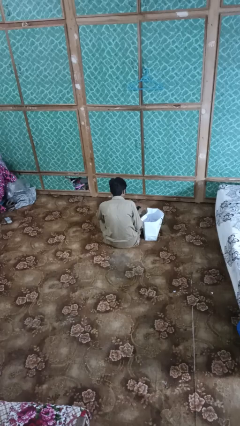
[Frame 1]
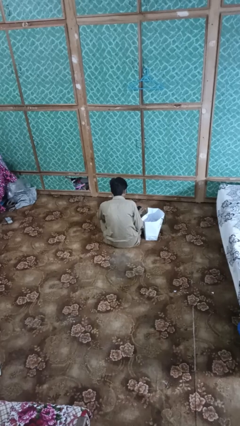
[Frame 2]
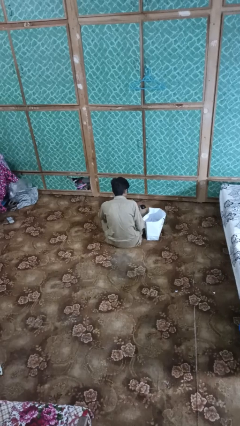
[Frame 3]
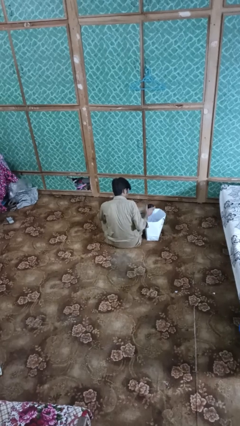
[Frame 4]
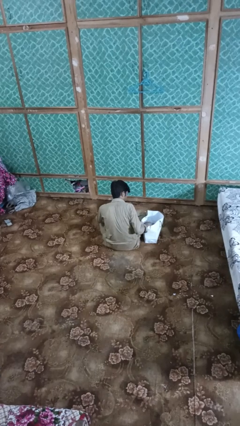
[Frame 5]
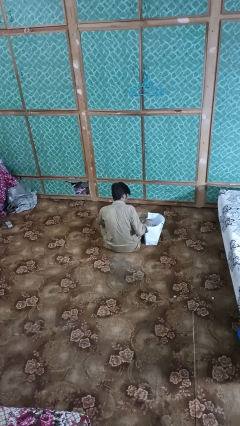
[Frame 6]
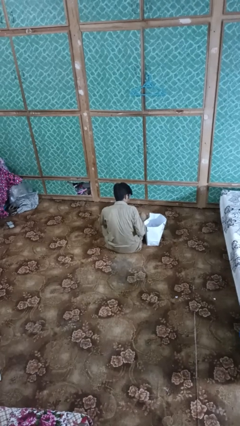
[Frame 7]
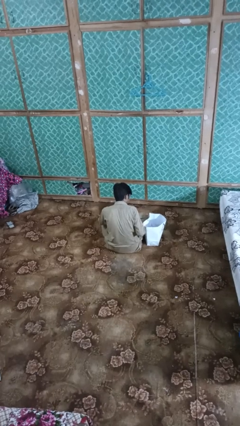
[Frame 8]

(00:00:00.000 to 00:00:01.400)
person puts object into bag

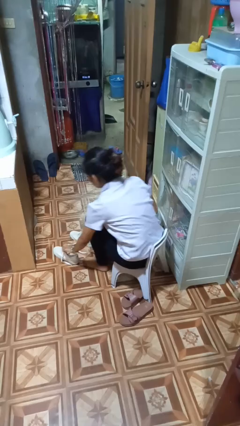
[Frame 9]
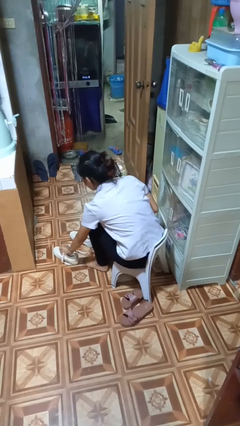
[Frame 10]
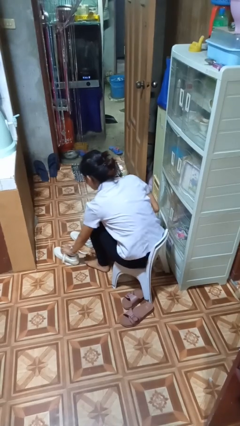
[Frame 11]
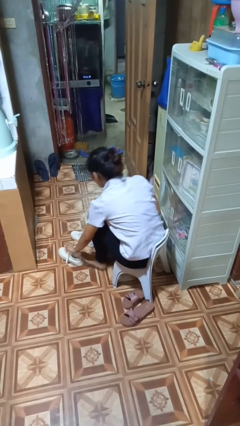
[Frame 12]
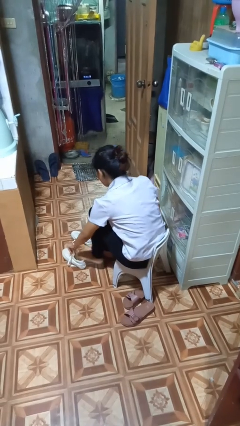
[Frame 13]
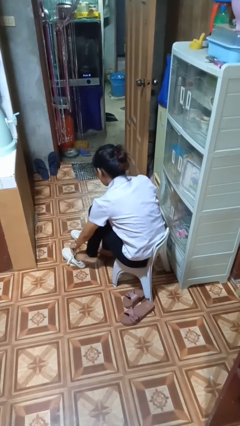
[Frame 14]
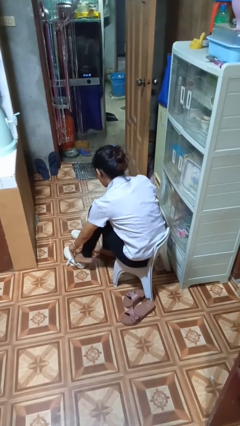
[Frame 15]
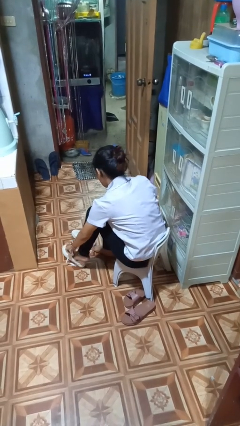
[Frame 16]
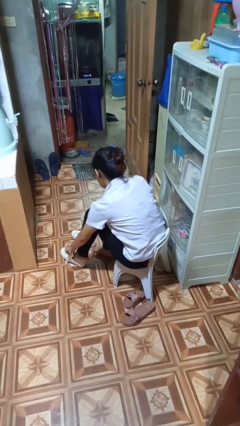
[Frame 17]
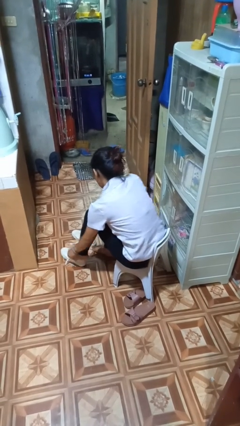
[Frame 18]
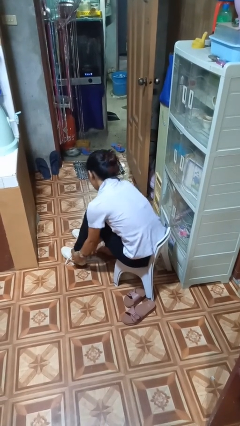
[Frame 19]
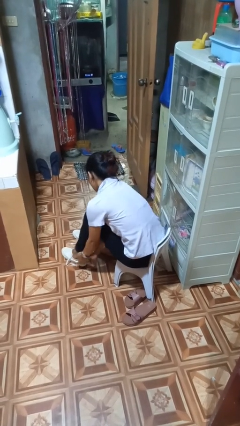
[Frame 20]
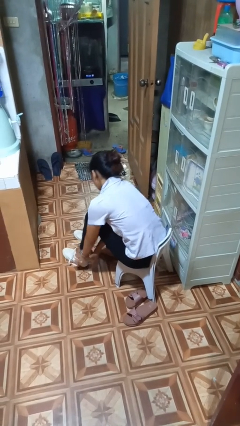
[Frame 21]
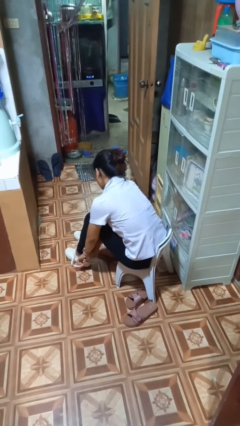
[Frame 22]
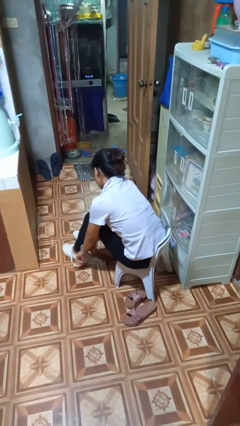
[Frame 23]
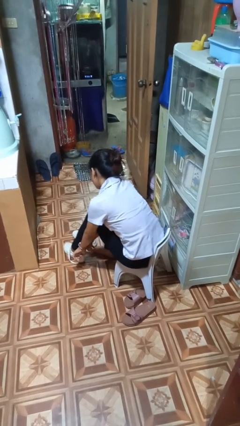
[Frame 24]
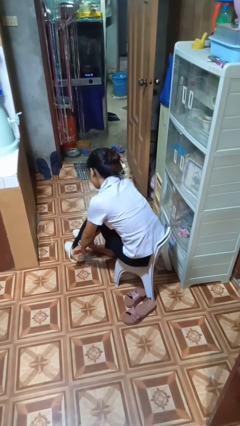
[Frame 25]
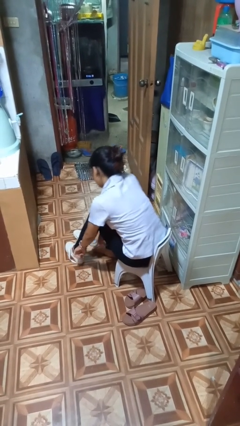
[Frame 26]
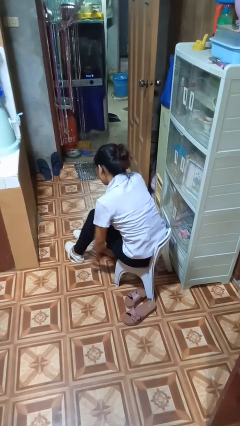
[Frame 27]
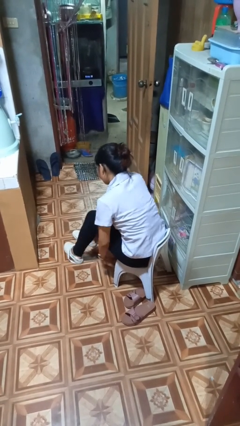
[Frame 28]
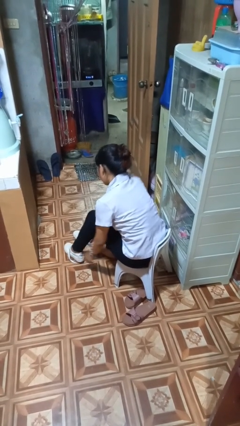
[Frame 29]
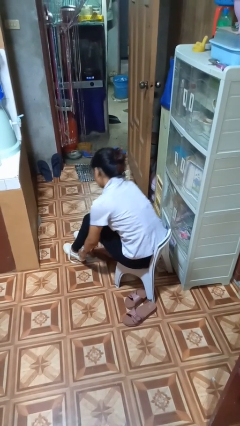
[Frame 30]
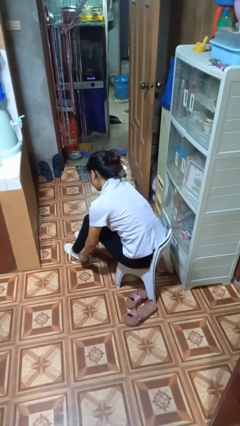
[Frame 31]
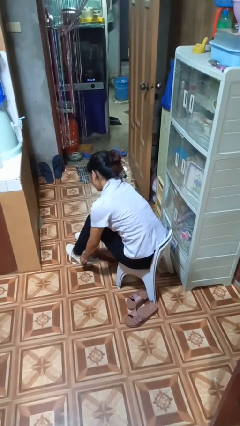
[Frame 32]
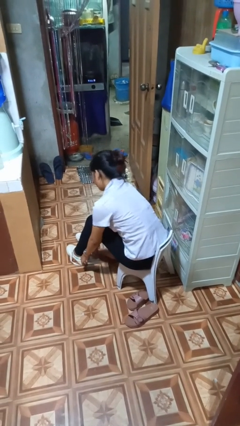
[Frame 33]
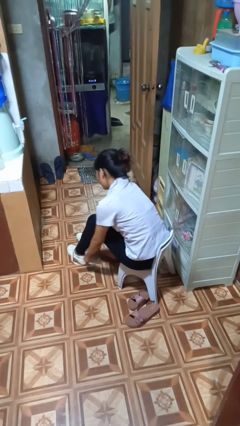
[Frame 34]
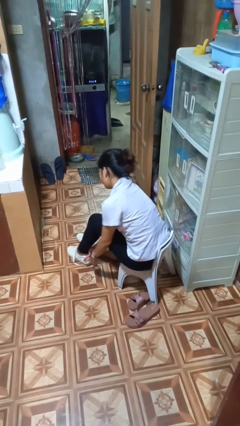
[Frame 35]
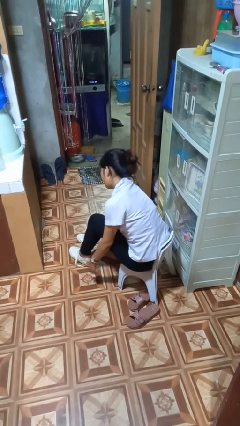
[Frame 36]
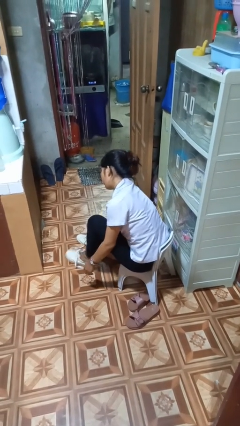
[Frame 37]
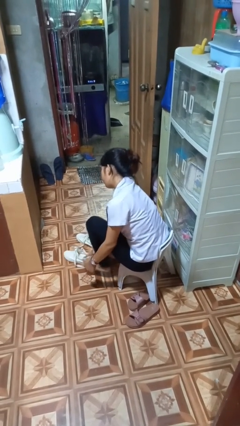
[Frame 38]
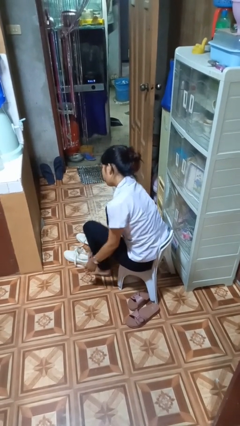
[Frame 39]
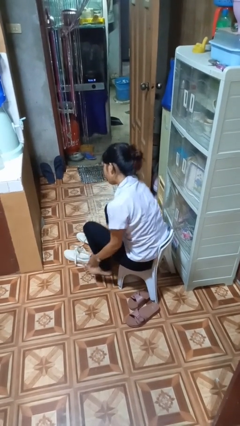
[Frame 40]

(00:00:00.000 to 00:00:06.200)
person puts on shoes

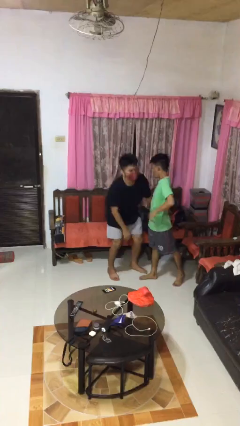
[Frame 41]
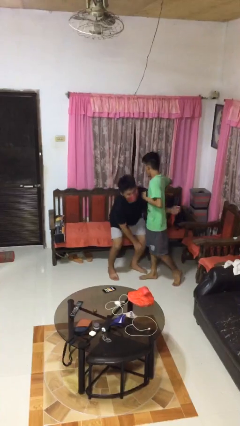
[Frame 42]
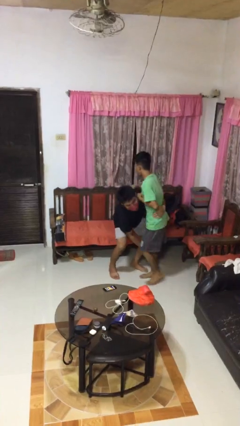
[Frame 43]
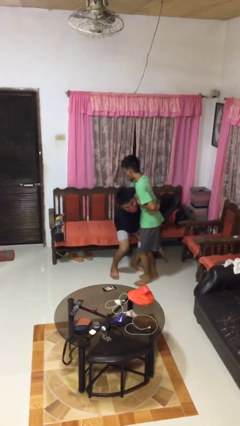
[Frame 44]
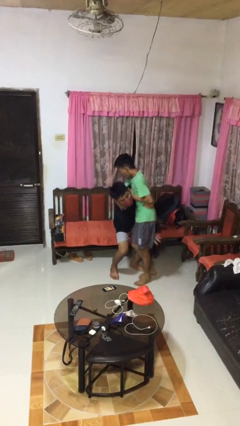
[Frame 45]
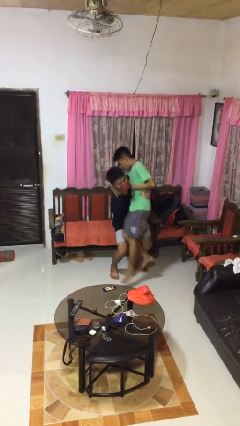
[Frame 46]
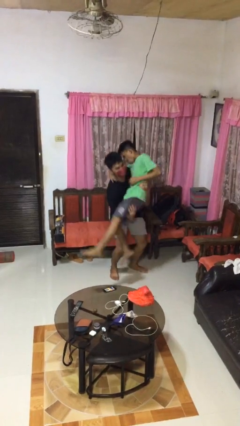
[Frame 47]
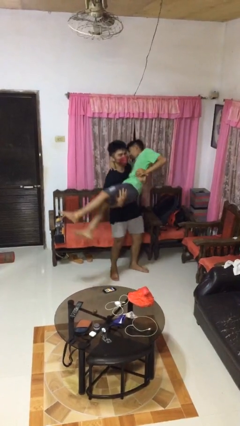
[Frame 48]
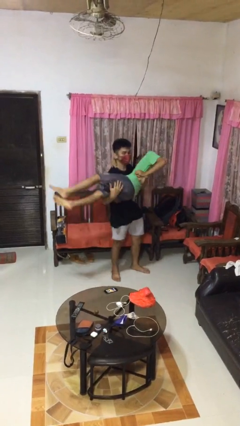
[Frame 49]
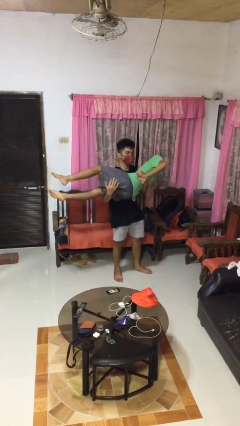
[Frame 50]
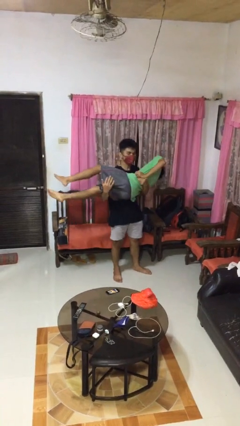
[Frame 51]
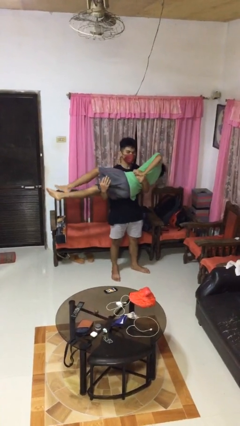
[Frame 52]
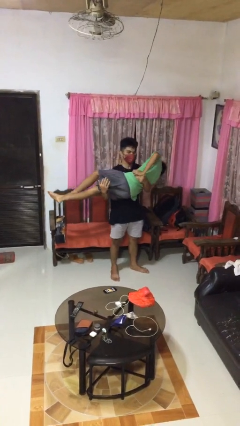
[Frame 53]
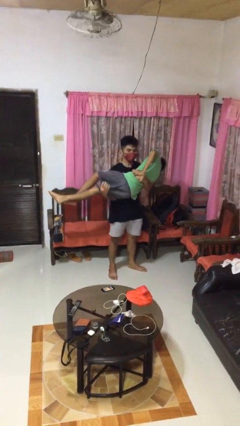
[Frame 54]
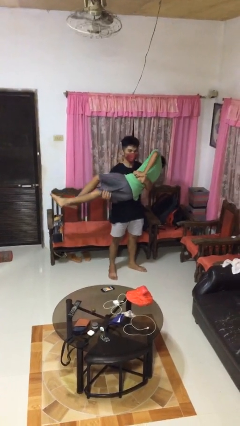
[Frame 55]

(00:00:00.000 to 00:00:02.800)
person picks up person

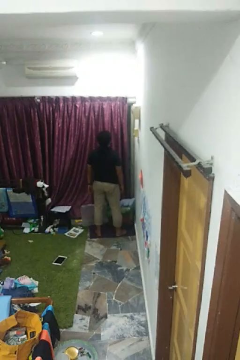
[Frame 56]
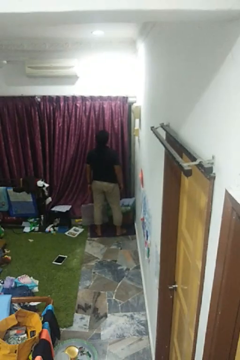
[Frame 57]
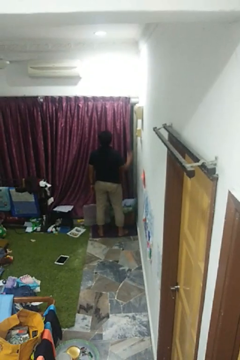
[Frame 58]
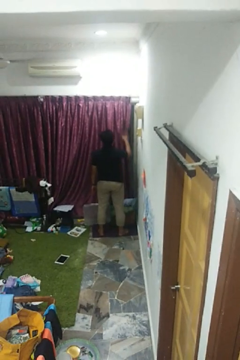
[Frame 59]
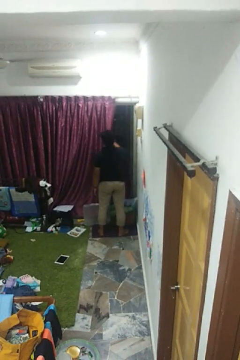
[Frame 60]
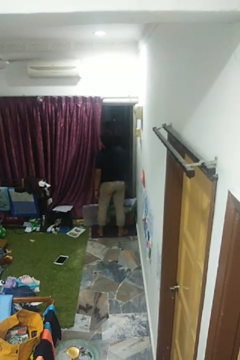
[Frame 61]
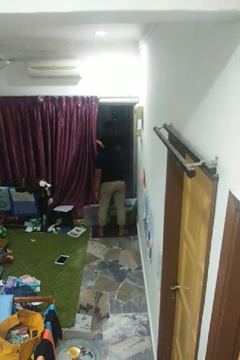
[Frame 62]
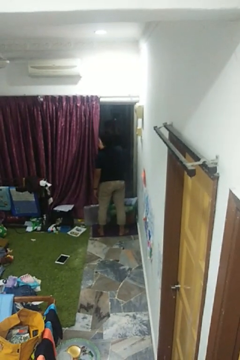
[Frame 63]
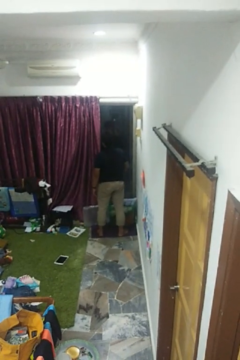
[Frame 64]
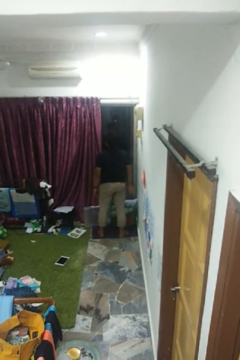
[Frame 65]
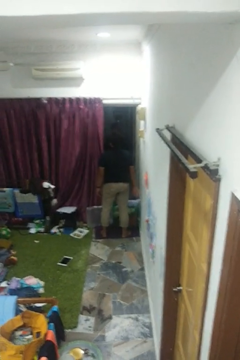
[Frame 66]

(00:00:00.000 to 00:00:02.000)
person opens curtains

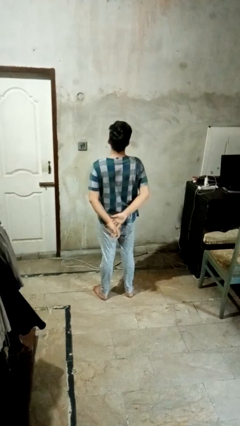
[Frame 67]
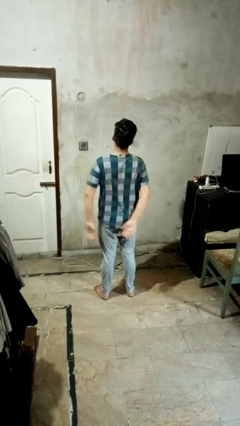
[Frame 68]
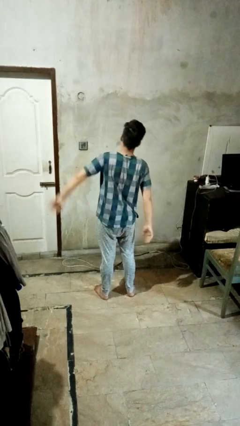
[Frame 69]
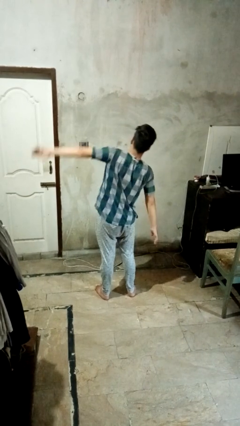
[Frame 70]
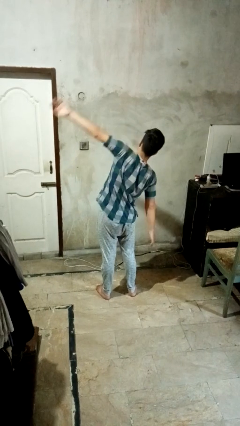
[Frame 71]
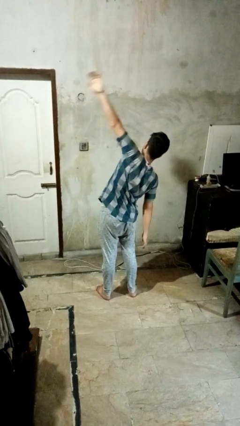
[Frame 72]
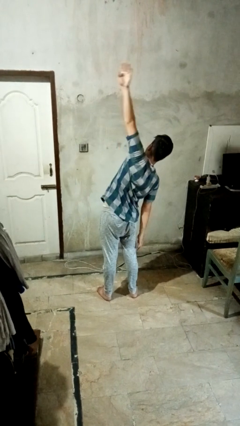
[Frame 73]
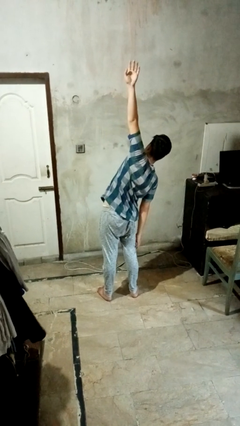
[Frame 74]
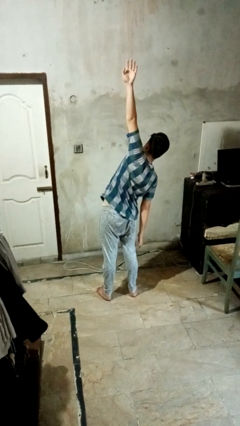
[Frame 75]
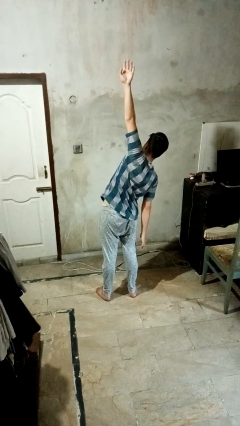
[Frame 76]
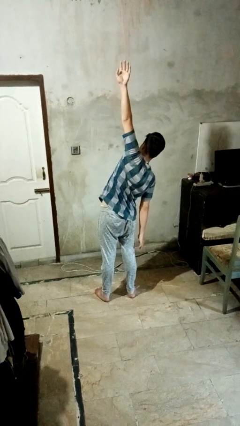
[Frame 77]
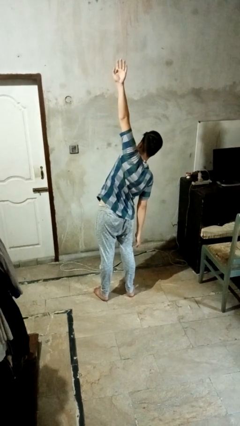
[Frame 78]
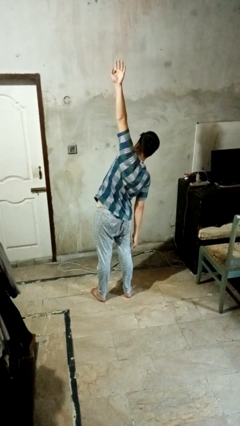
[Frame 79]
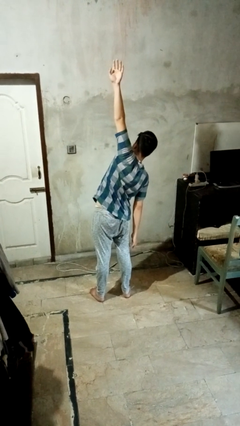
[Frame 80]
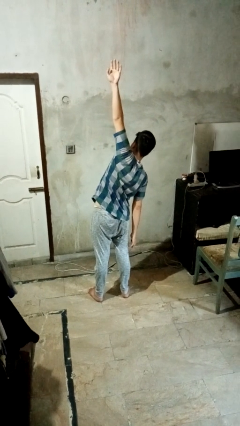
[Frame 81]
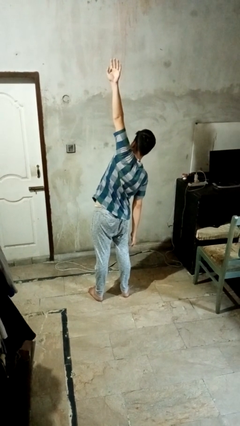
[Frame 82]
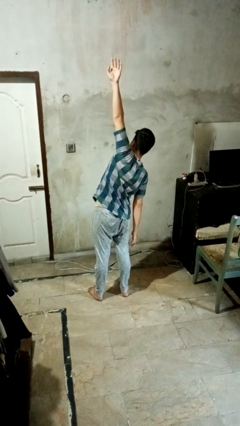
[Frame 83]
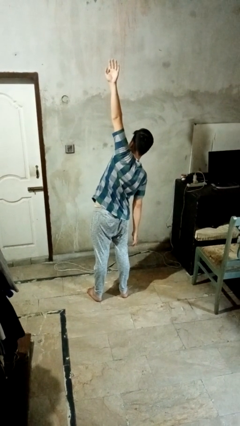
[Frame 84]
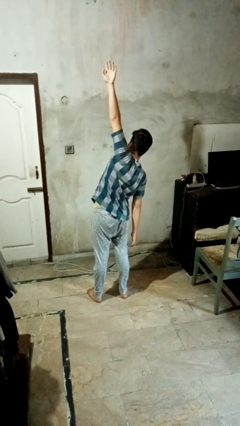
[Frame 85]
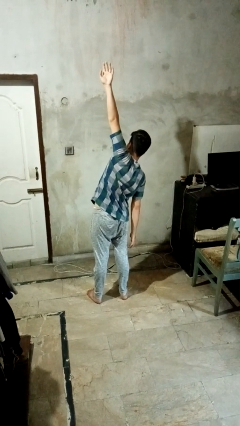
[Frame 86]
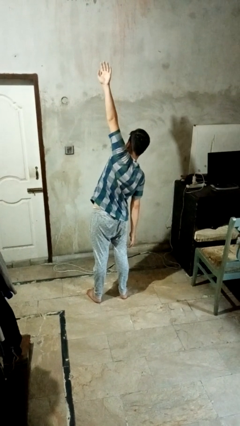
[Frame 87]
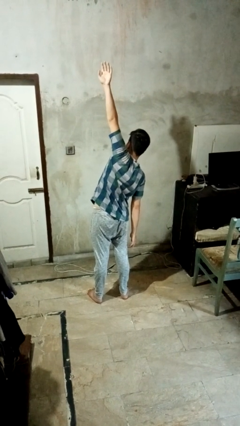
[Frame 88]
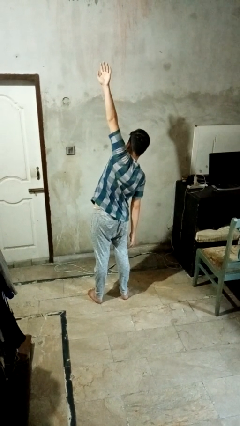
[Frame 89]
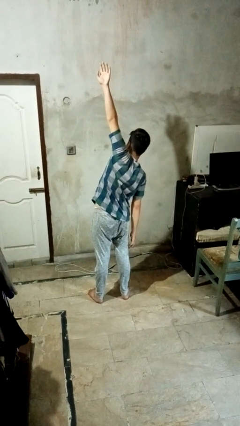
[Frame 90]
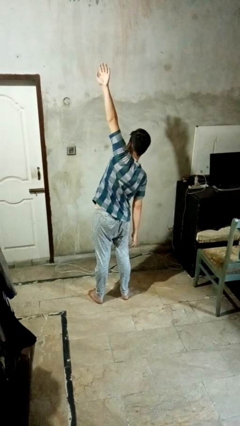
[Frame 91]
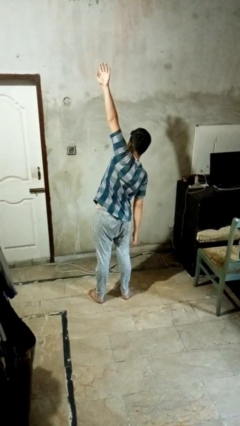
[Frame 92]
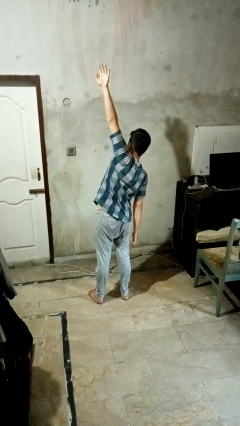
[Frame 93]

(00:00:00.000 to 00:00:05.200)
person stretches arms to side
